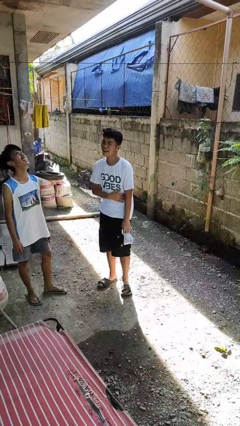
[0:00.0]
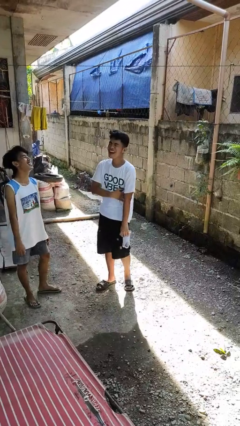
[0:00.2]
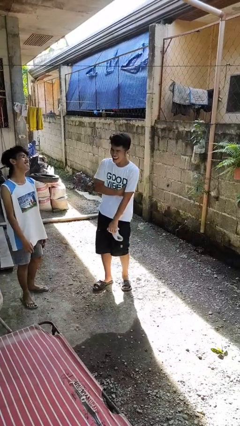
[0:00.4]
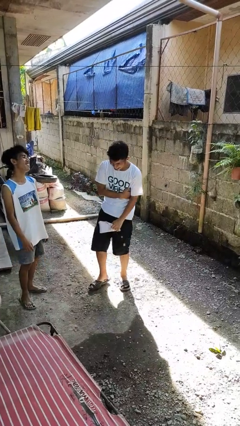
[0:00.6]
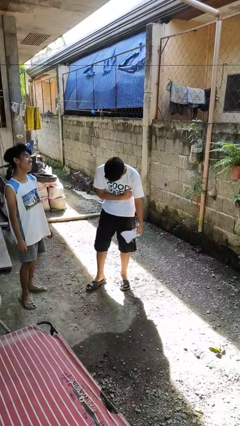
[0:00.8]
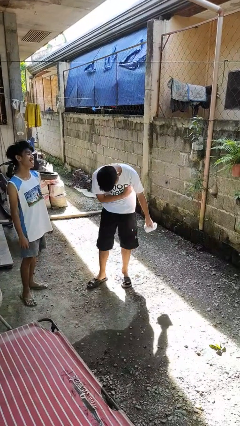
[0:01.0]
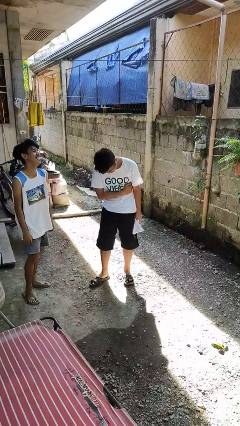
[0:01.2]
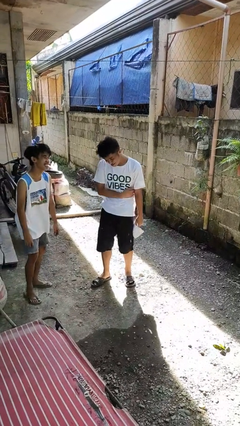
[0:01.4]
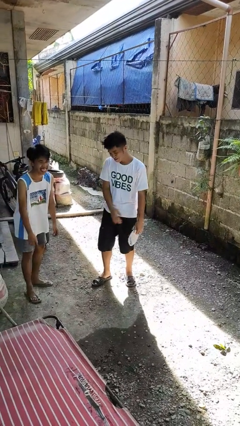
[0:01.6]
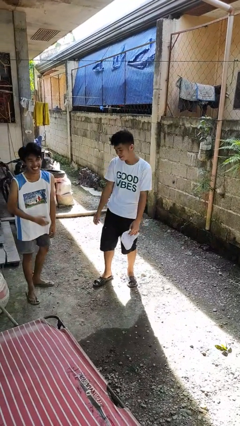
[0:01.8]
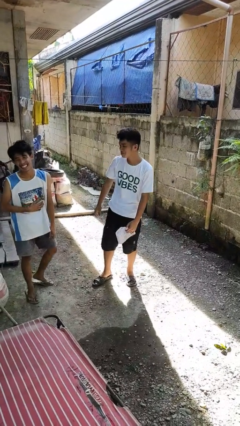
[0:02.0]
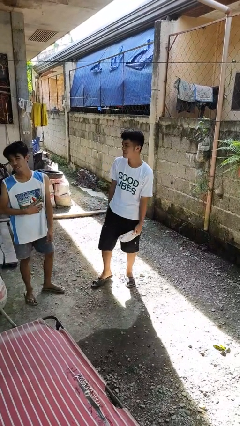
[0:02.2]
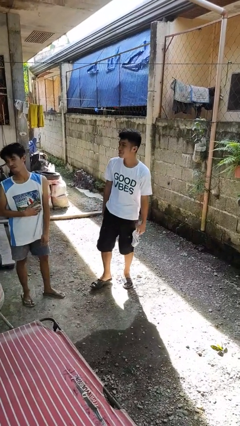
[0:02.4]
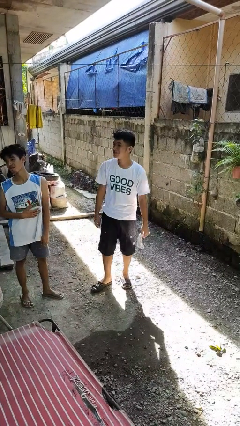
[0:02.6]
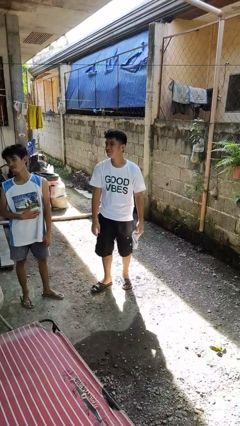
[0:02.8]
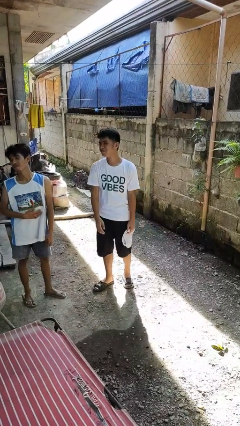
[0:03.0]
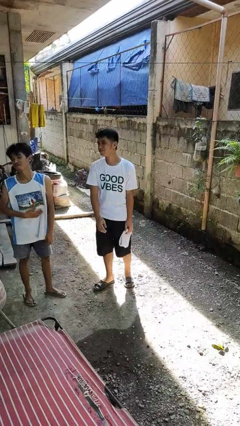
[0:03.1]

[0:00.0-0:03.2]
person laughs with person

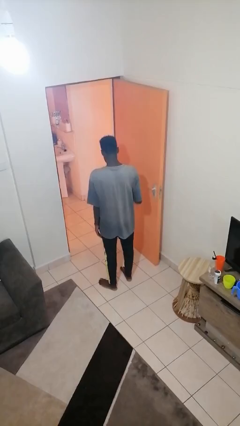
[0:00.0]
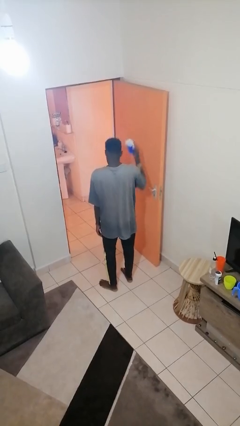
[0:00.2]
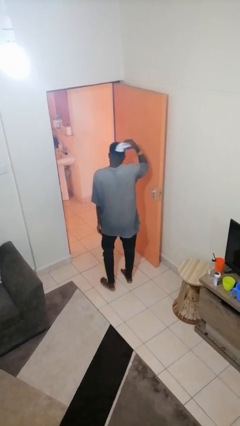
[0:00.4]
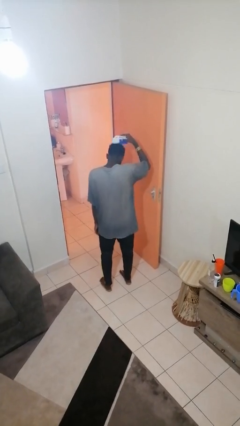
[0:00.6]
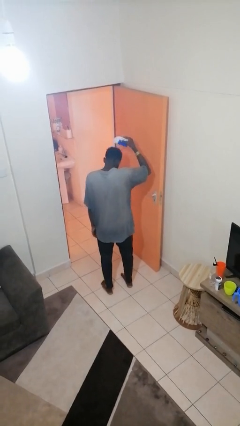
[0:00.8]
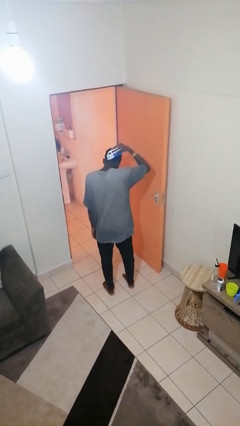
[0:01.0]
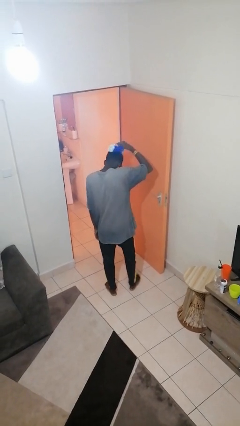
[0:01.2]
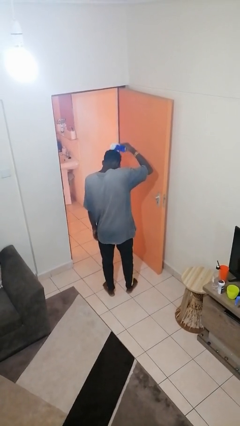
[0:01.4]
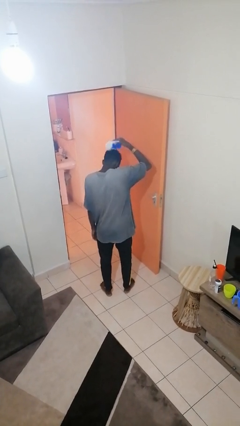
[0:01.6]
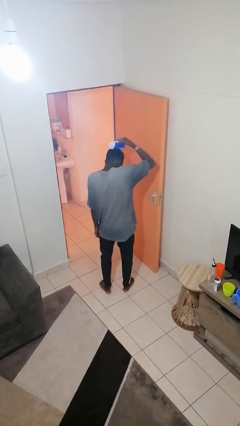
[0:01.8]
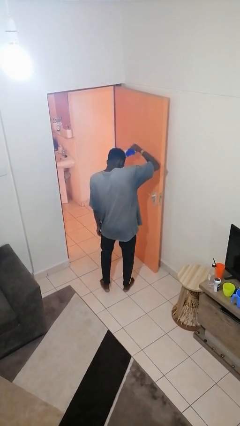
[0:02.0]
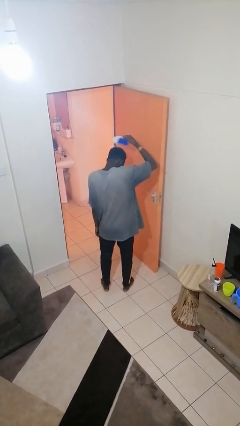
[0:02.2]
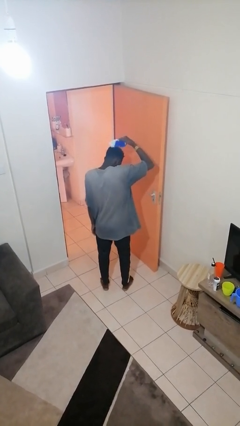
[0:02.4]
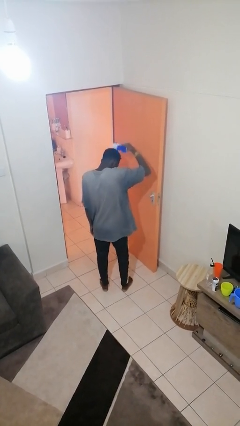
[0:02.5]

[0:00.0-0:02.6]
person brushes hair

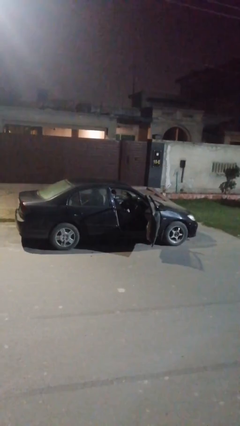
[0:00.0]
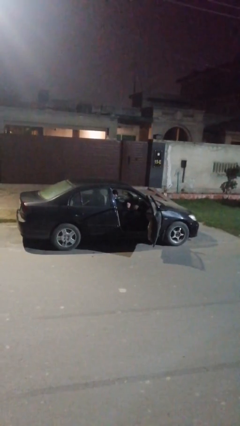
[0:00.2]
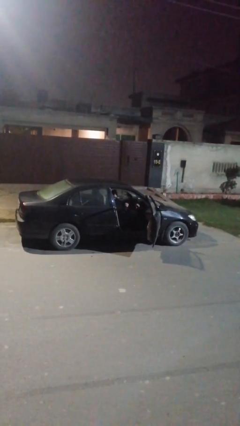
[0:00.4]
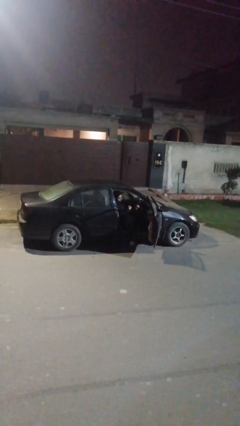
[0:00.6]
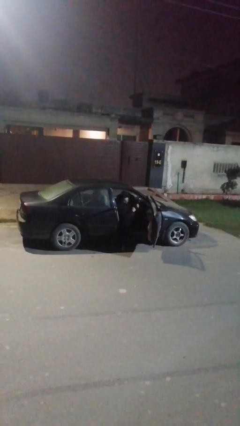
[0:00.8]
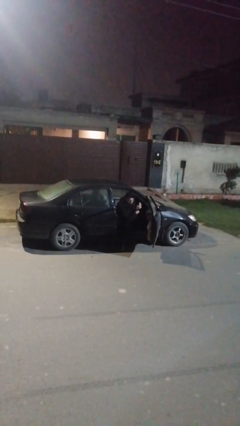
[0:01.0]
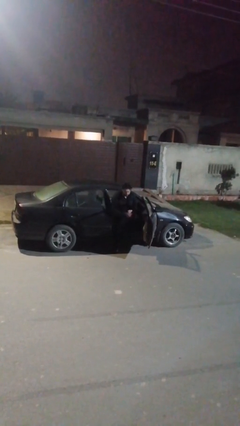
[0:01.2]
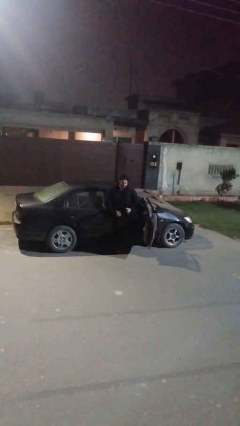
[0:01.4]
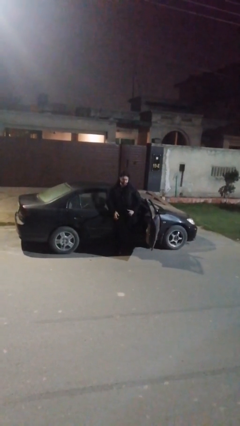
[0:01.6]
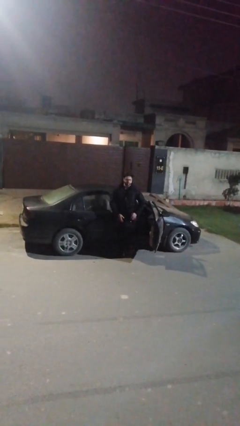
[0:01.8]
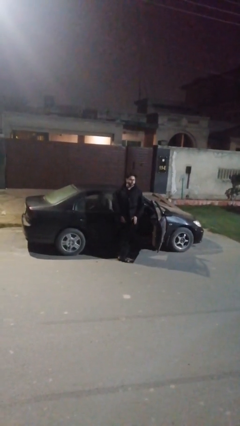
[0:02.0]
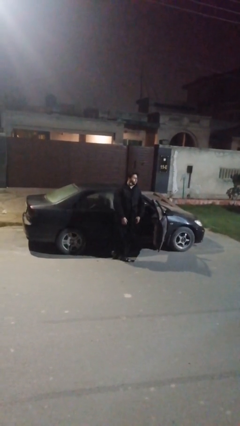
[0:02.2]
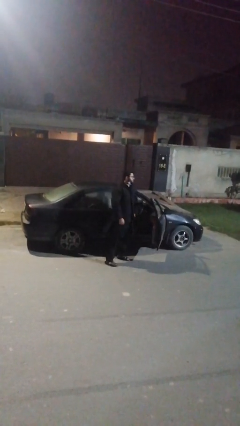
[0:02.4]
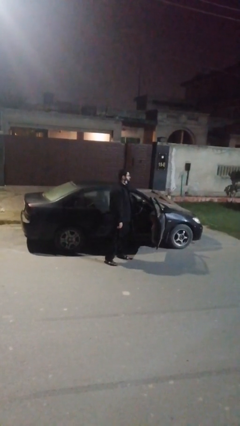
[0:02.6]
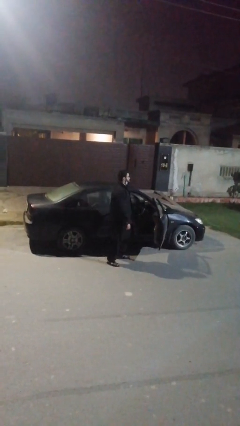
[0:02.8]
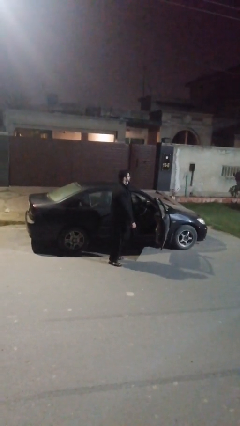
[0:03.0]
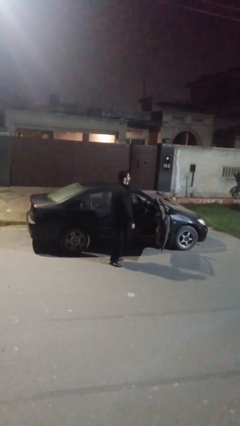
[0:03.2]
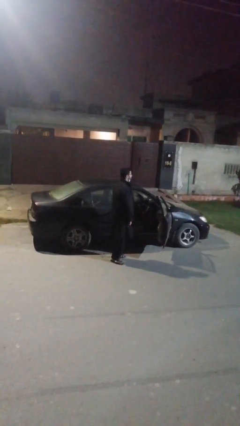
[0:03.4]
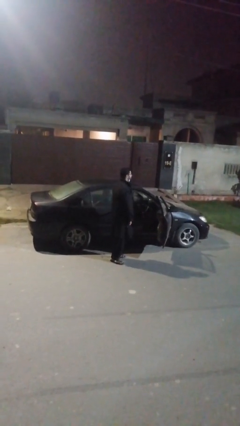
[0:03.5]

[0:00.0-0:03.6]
person exits car

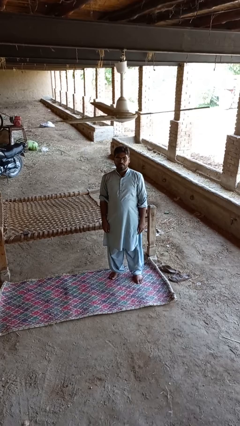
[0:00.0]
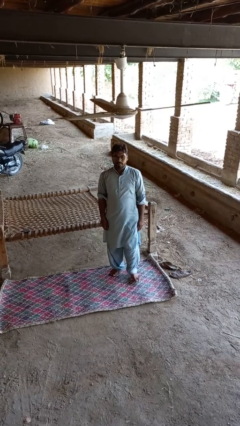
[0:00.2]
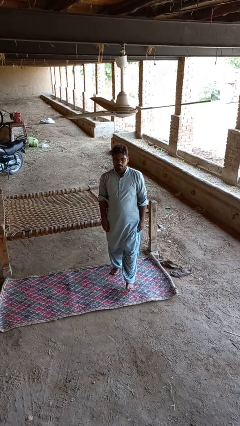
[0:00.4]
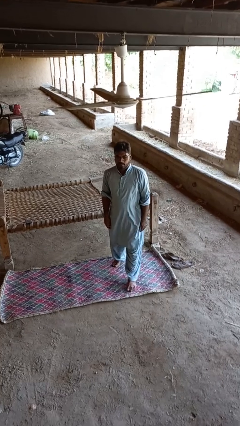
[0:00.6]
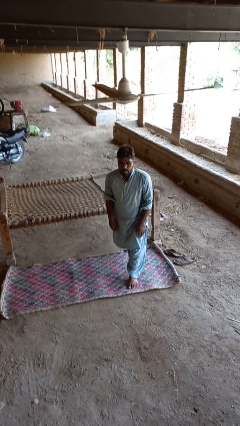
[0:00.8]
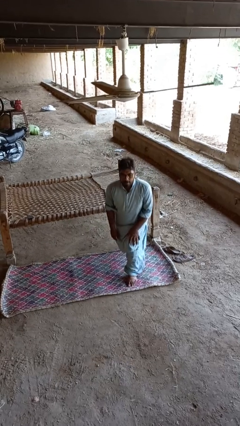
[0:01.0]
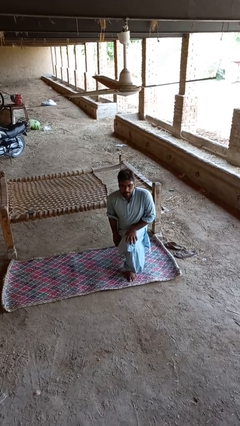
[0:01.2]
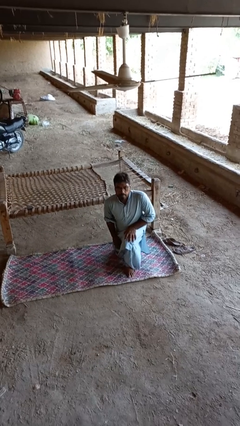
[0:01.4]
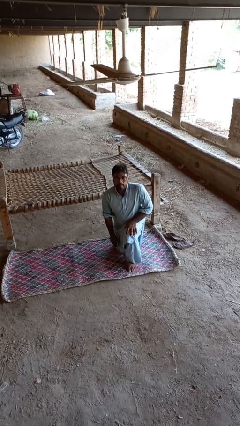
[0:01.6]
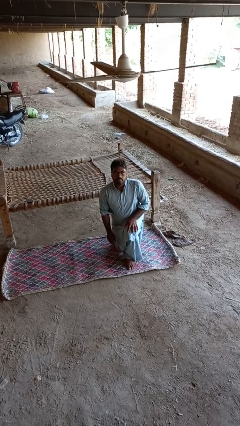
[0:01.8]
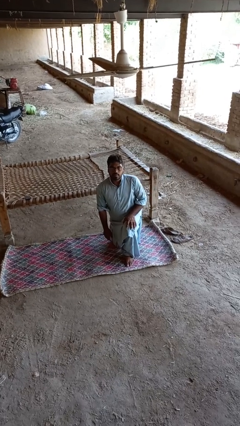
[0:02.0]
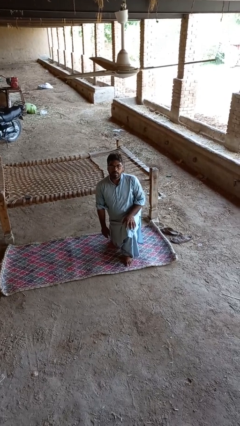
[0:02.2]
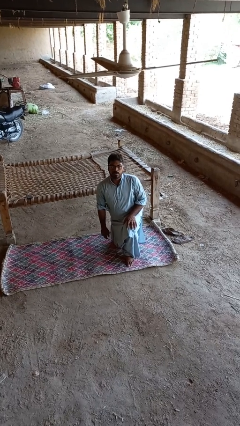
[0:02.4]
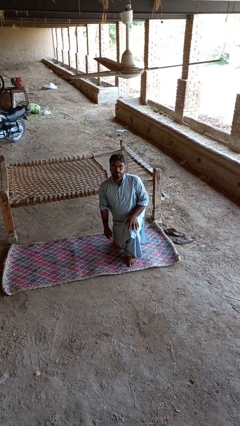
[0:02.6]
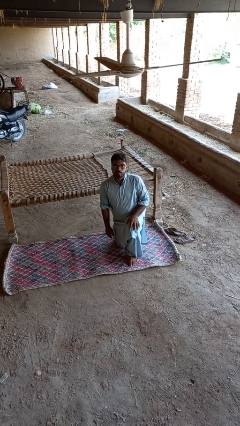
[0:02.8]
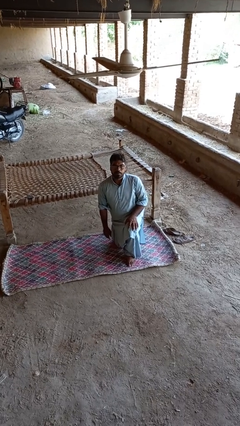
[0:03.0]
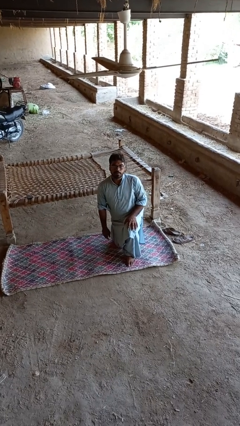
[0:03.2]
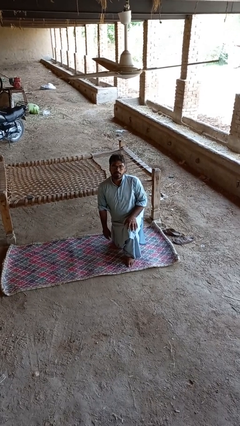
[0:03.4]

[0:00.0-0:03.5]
person kneels

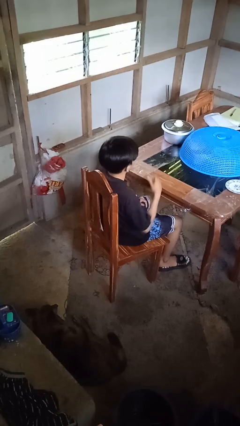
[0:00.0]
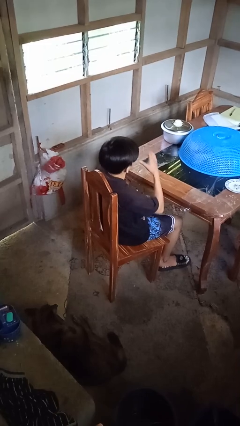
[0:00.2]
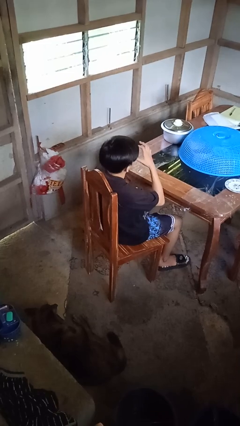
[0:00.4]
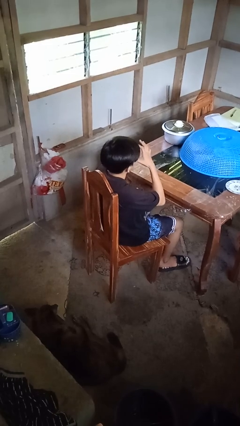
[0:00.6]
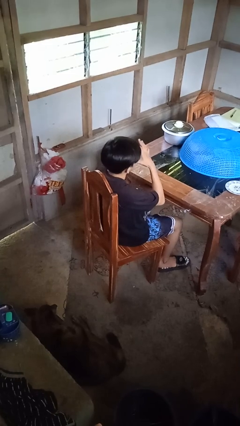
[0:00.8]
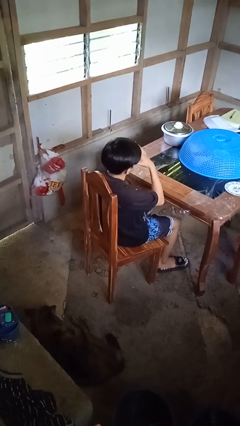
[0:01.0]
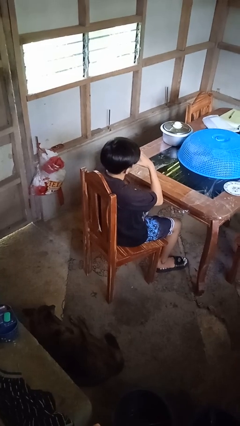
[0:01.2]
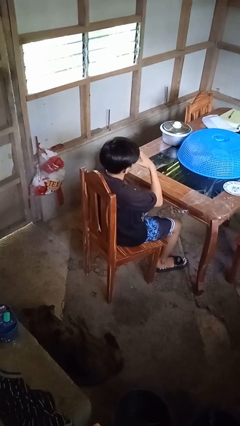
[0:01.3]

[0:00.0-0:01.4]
person licks fingers

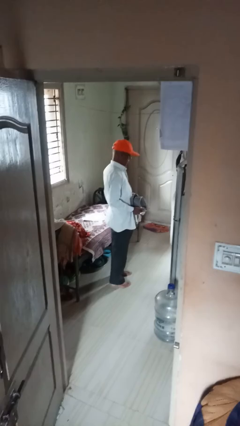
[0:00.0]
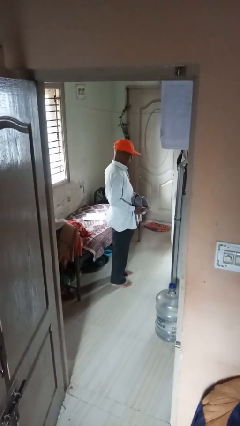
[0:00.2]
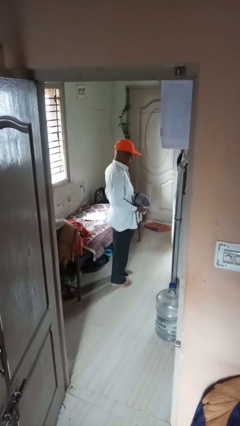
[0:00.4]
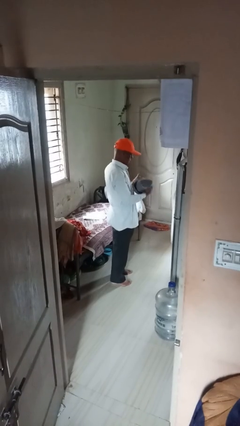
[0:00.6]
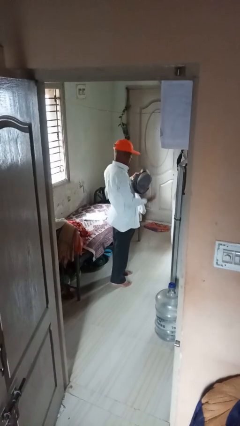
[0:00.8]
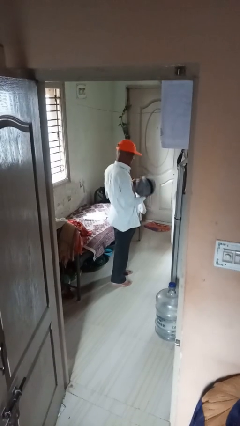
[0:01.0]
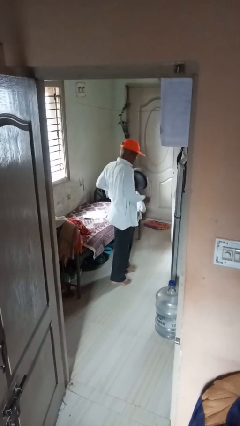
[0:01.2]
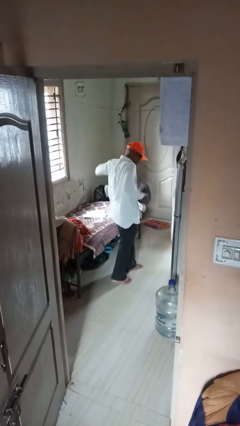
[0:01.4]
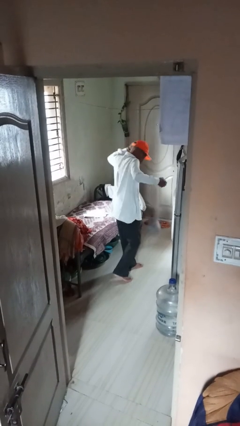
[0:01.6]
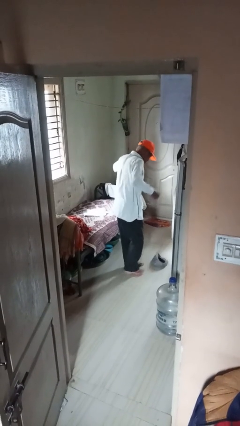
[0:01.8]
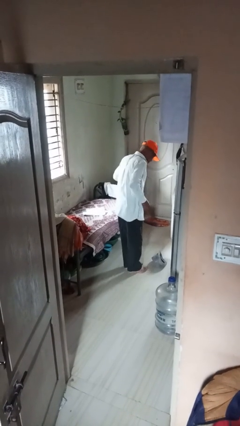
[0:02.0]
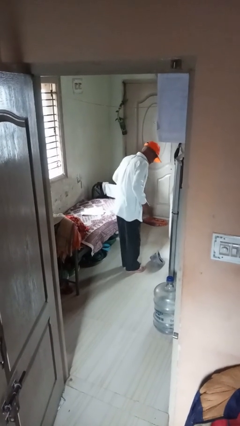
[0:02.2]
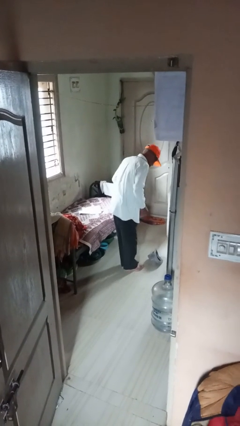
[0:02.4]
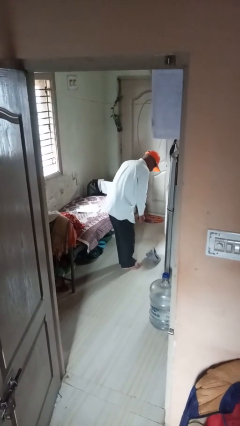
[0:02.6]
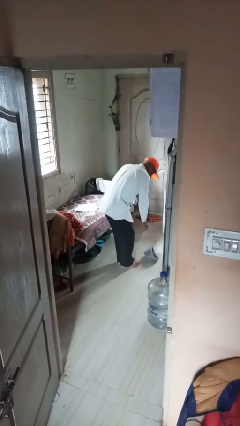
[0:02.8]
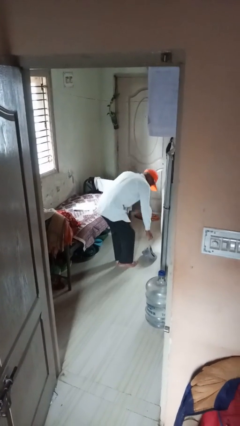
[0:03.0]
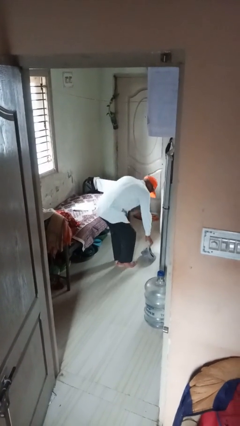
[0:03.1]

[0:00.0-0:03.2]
person drops object
